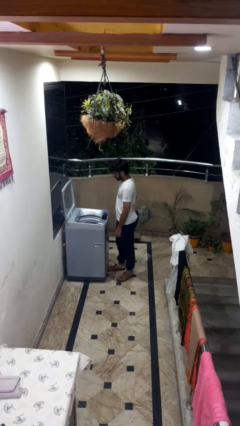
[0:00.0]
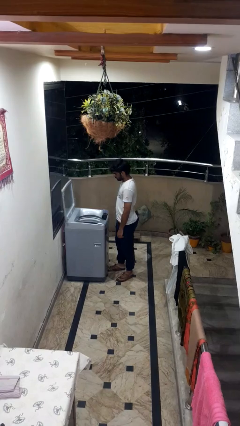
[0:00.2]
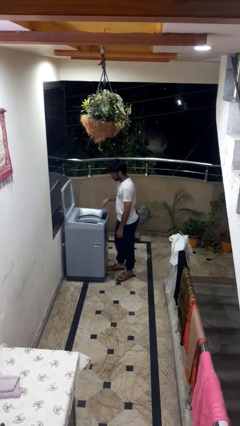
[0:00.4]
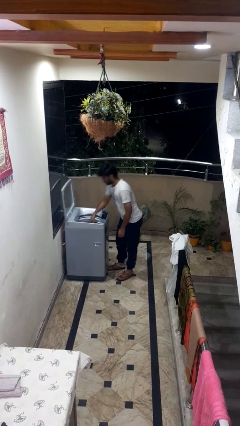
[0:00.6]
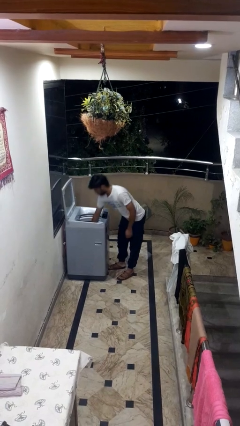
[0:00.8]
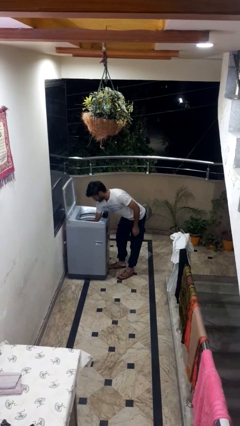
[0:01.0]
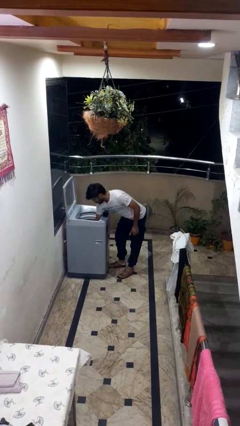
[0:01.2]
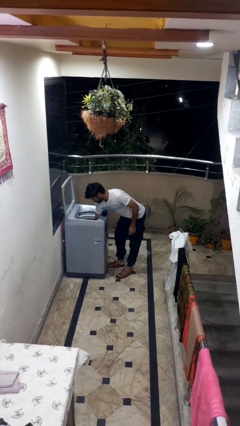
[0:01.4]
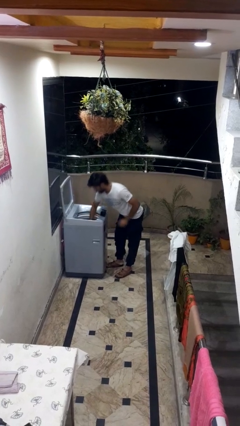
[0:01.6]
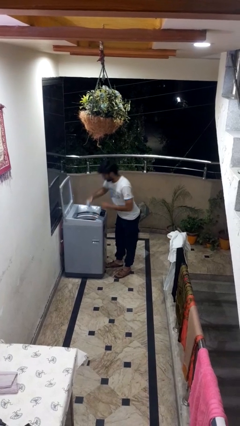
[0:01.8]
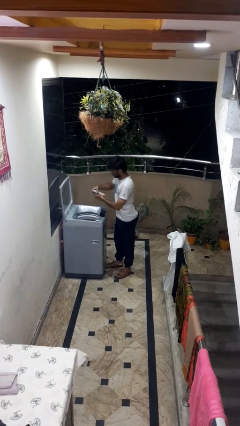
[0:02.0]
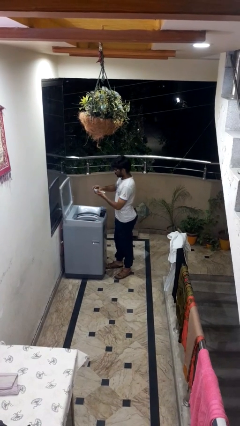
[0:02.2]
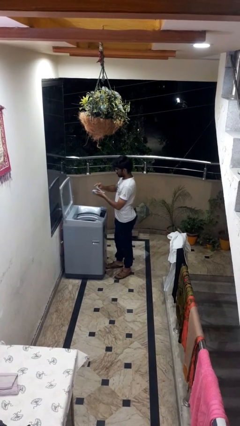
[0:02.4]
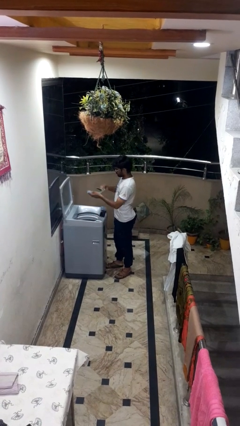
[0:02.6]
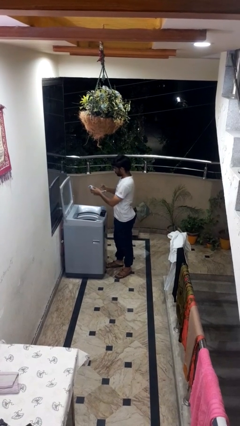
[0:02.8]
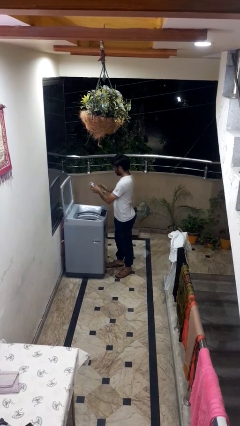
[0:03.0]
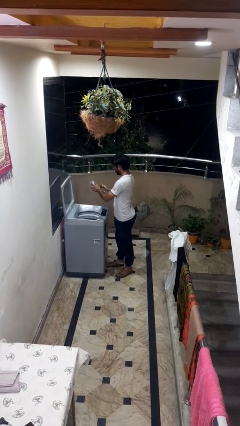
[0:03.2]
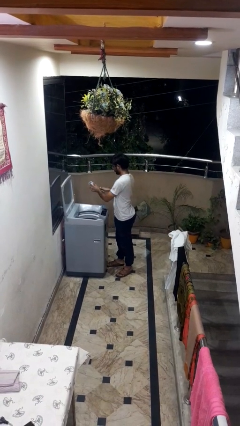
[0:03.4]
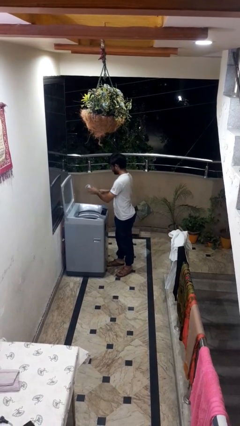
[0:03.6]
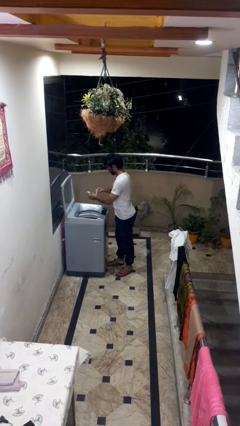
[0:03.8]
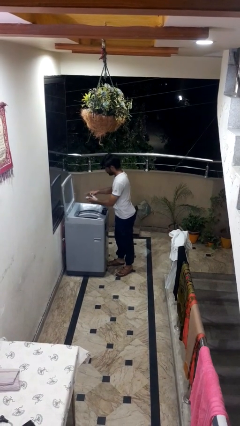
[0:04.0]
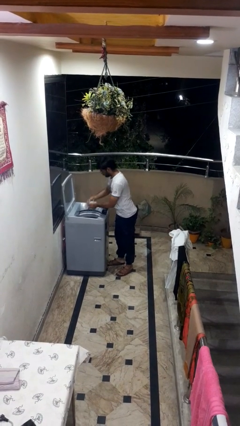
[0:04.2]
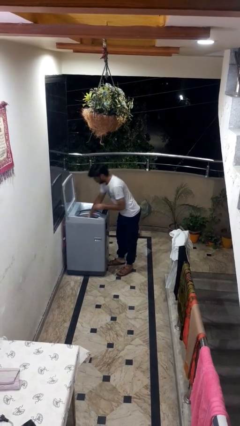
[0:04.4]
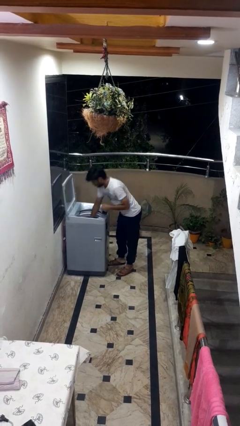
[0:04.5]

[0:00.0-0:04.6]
person cleans dryer lint trap

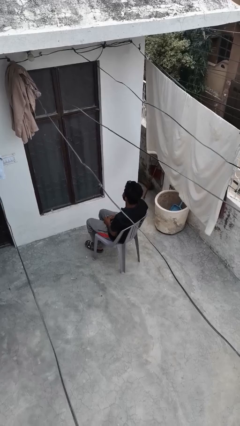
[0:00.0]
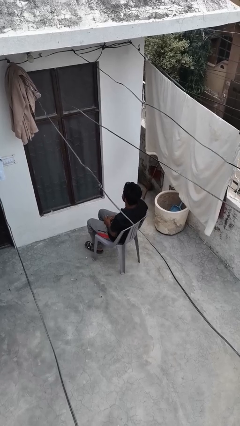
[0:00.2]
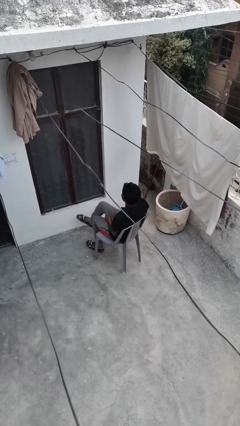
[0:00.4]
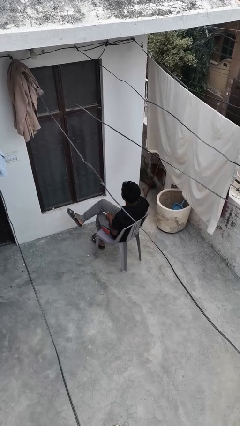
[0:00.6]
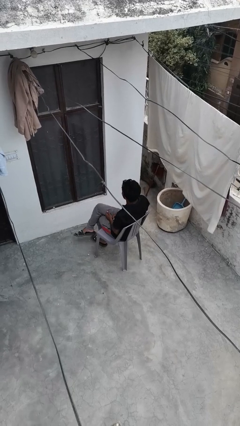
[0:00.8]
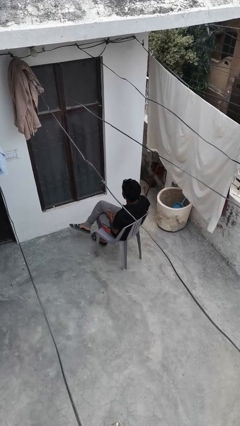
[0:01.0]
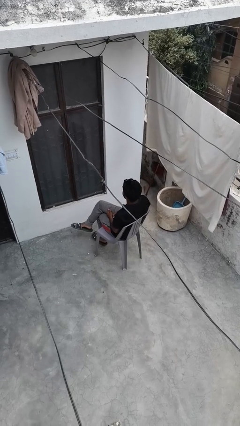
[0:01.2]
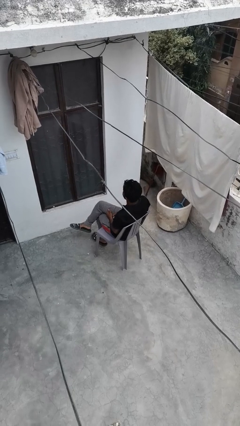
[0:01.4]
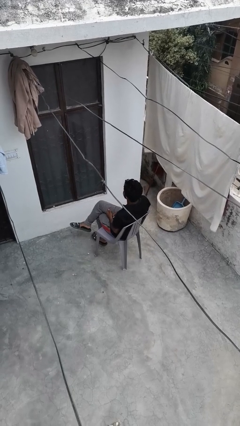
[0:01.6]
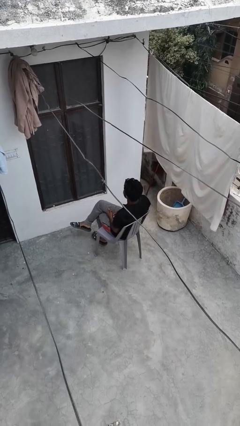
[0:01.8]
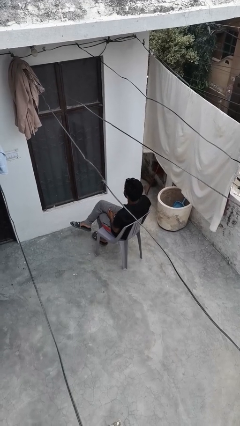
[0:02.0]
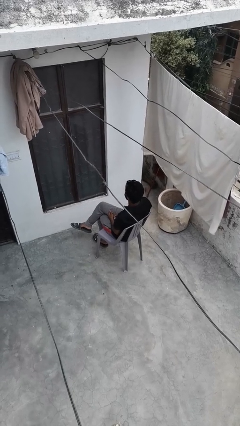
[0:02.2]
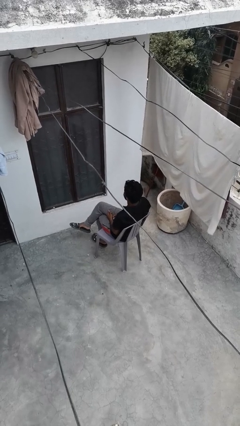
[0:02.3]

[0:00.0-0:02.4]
person crosses legs

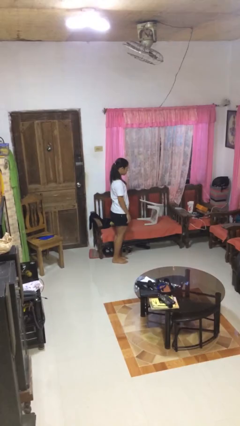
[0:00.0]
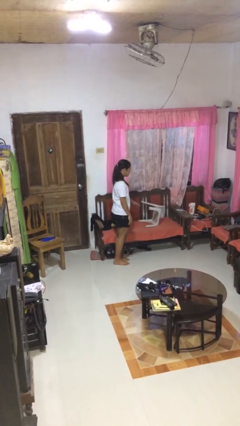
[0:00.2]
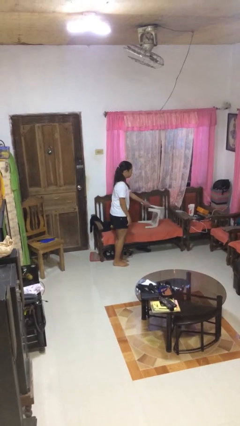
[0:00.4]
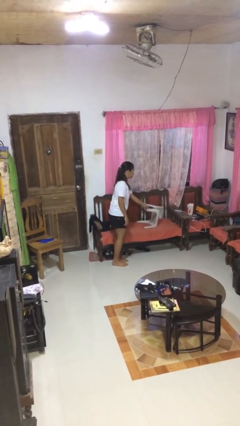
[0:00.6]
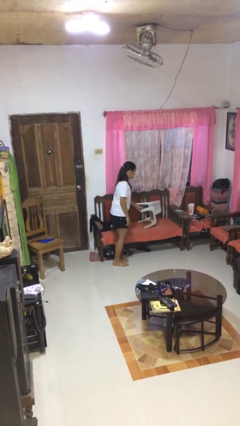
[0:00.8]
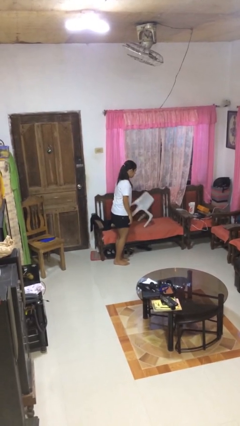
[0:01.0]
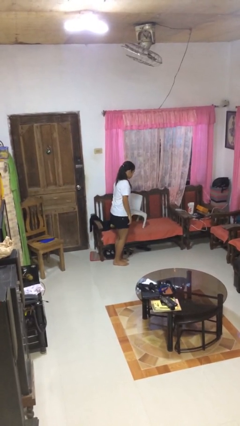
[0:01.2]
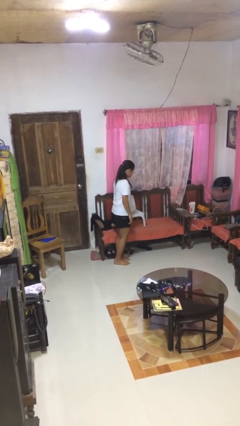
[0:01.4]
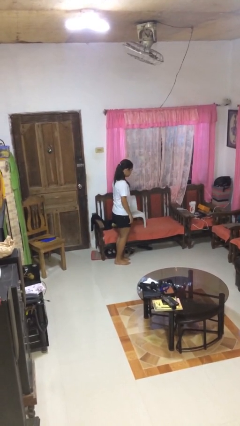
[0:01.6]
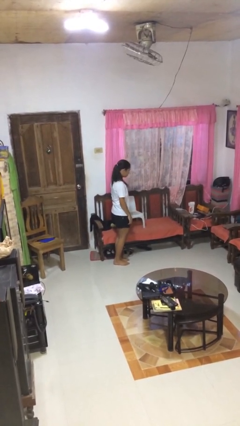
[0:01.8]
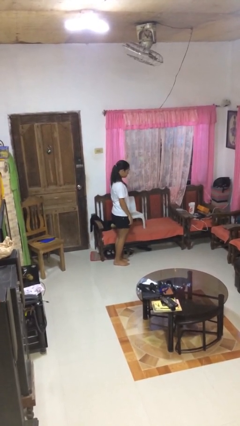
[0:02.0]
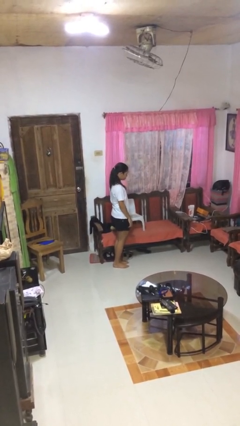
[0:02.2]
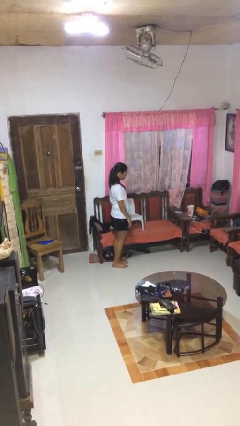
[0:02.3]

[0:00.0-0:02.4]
person sets upright furniture

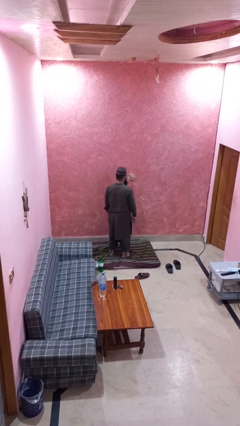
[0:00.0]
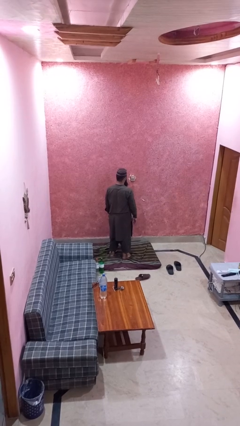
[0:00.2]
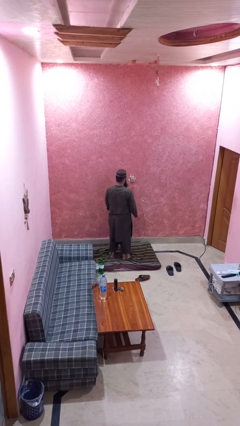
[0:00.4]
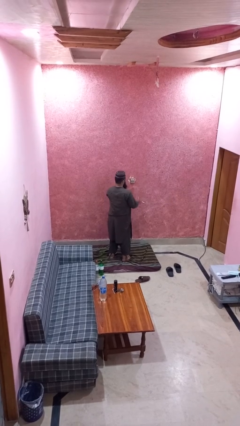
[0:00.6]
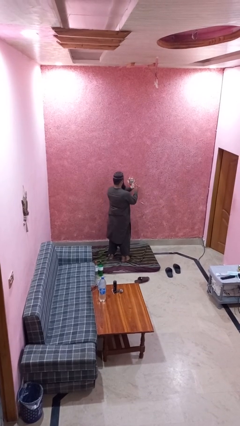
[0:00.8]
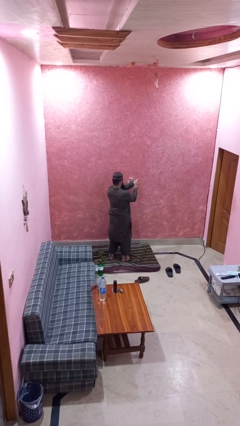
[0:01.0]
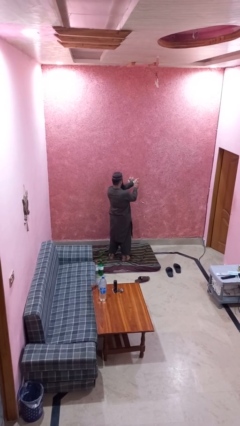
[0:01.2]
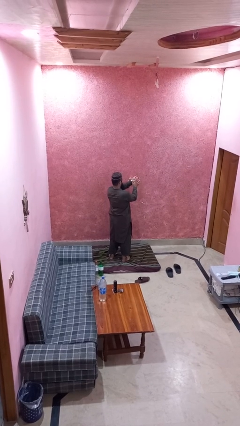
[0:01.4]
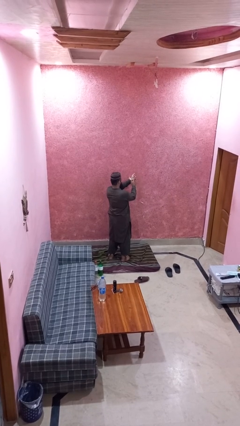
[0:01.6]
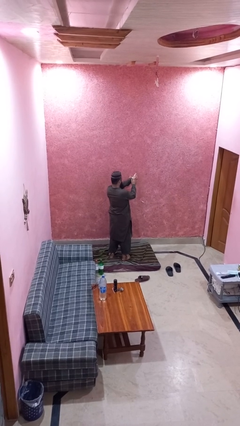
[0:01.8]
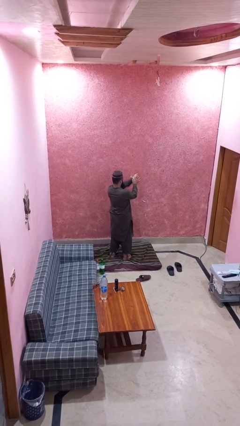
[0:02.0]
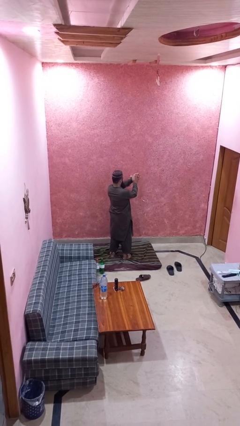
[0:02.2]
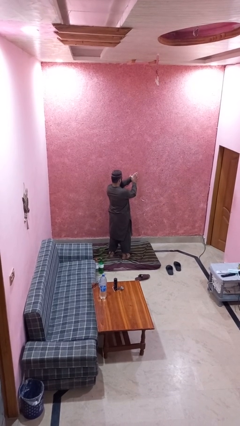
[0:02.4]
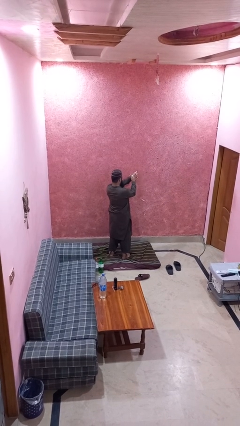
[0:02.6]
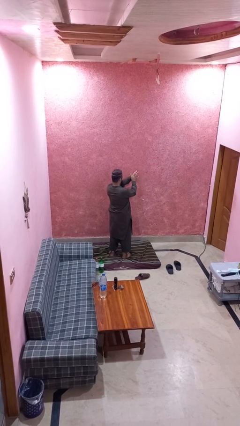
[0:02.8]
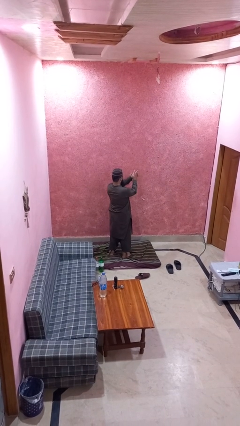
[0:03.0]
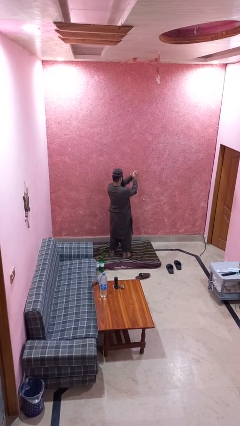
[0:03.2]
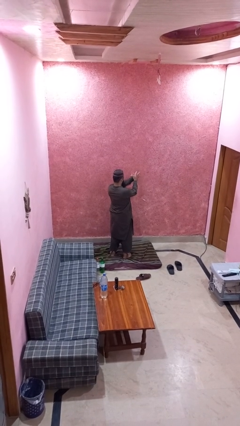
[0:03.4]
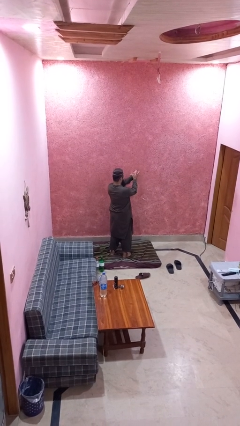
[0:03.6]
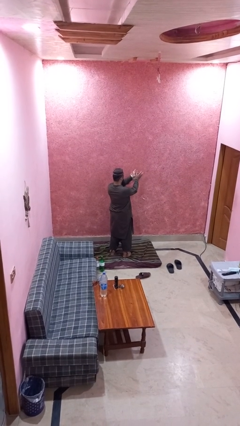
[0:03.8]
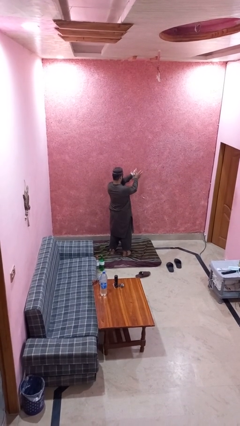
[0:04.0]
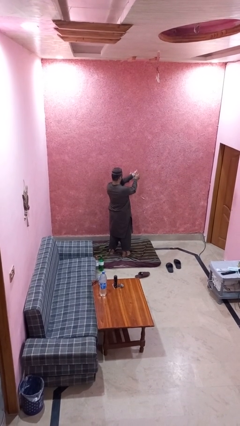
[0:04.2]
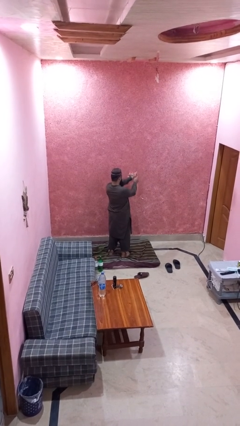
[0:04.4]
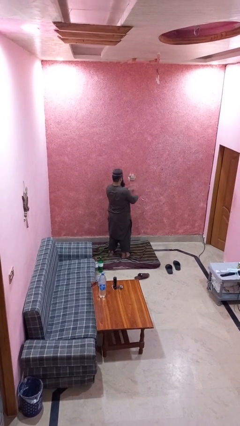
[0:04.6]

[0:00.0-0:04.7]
person snaps fingers

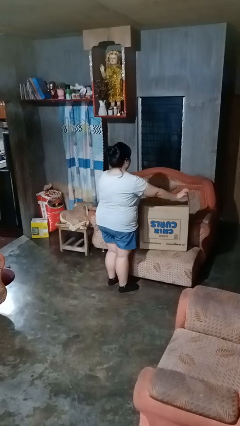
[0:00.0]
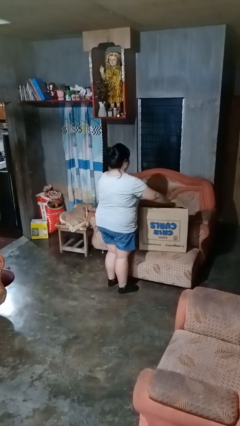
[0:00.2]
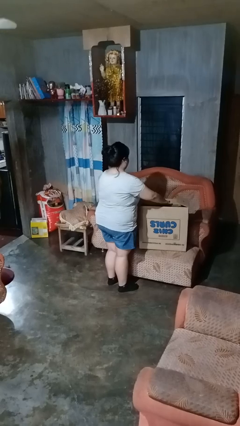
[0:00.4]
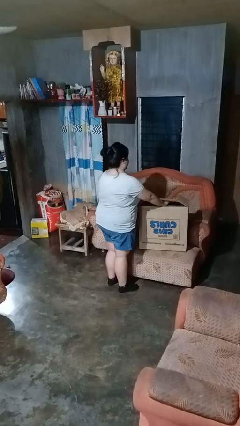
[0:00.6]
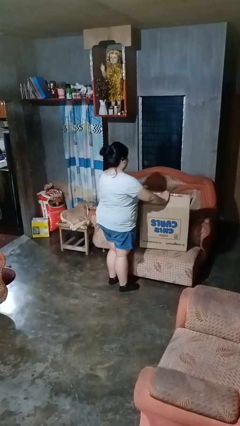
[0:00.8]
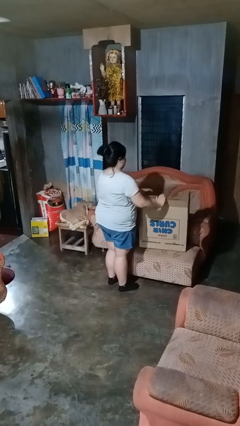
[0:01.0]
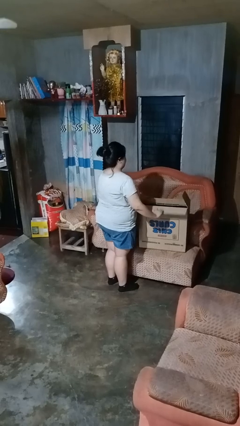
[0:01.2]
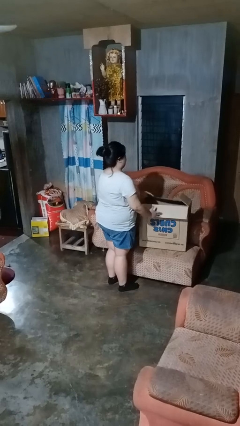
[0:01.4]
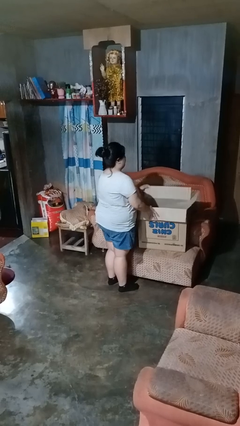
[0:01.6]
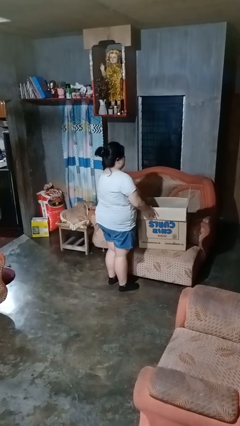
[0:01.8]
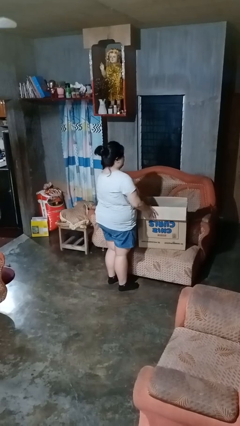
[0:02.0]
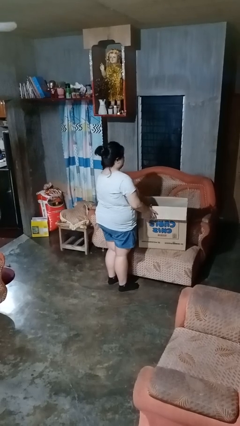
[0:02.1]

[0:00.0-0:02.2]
person opens box

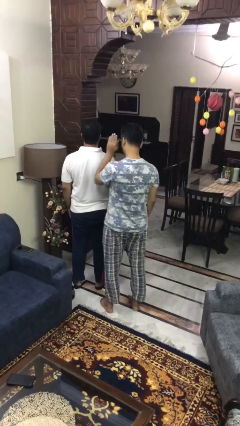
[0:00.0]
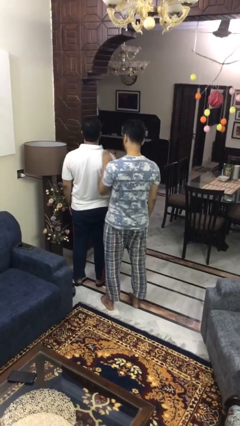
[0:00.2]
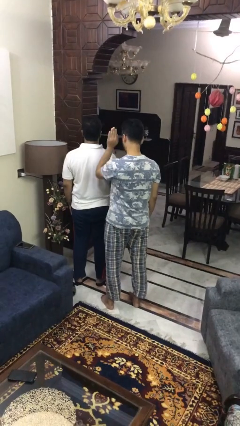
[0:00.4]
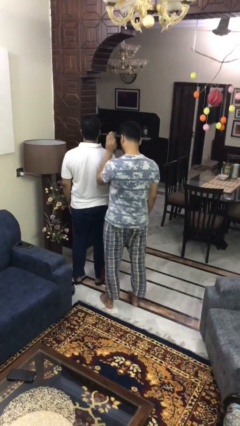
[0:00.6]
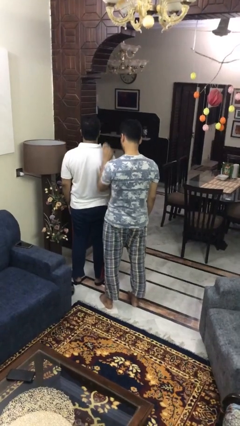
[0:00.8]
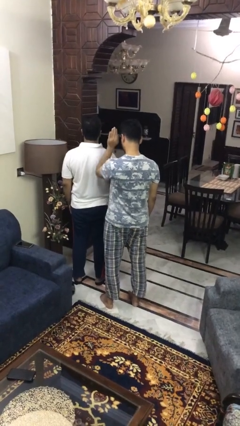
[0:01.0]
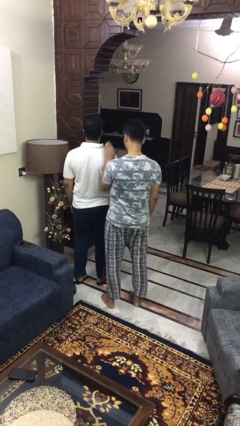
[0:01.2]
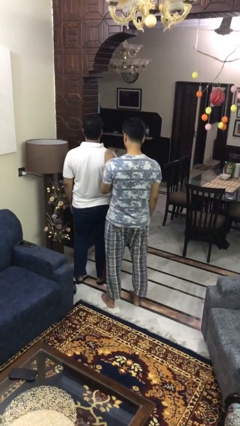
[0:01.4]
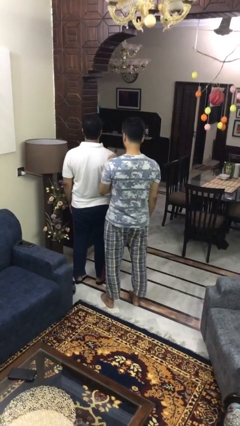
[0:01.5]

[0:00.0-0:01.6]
person pounds shoulders of person
